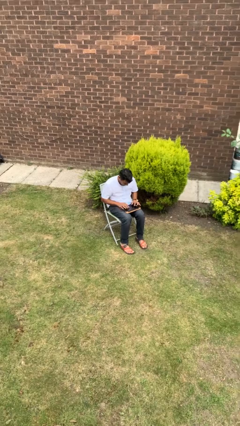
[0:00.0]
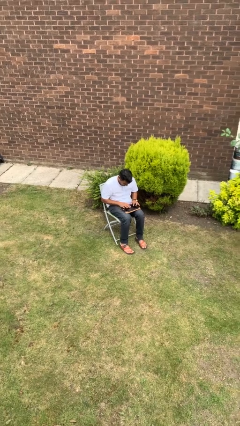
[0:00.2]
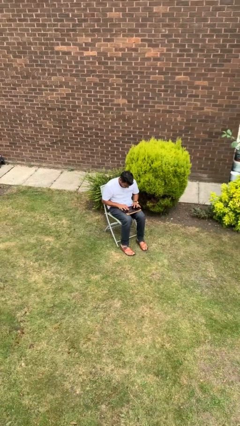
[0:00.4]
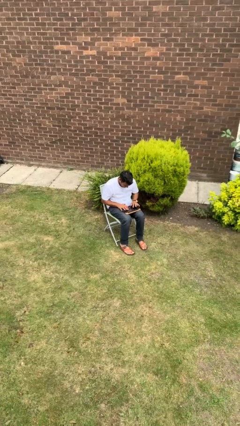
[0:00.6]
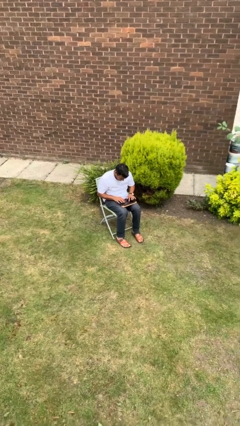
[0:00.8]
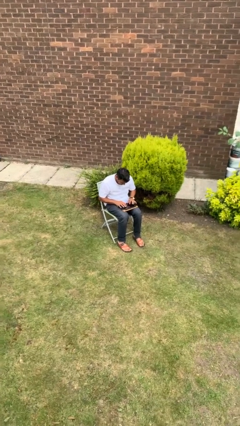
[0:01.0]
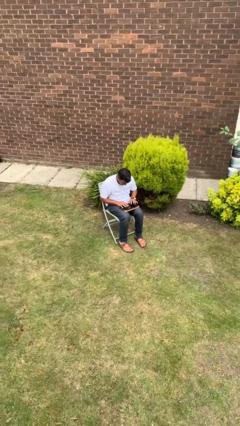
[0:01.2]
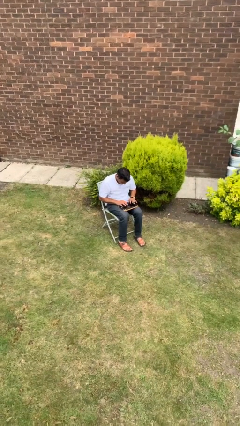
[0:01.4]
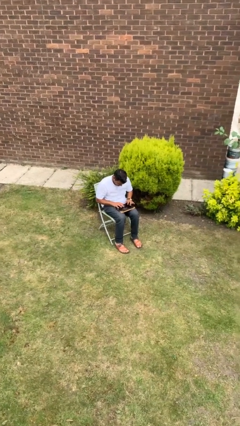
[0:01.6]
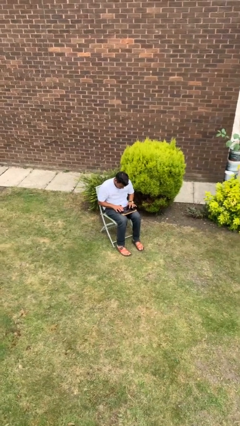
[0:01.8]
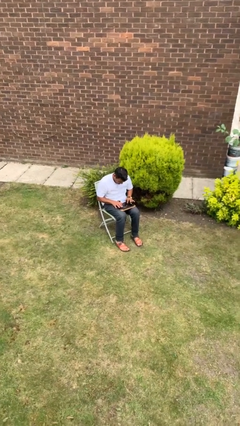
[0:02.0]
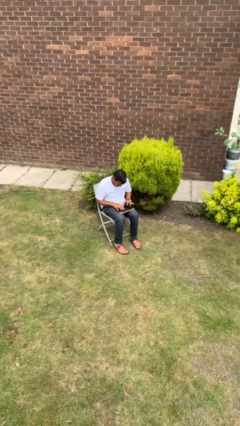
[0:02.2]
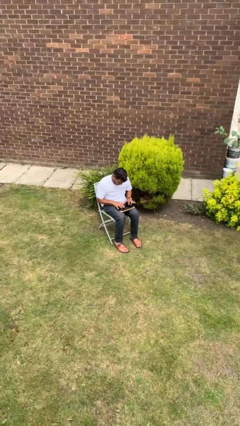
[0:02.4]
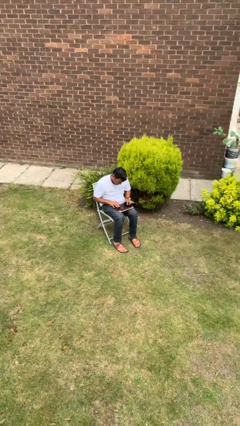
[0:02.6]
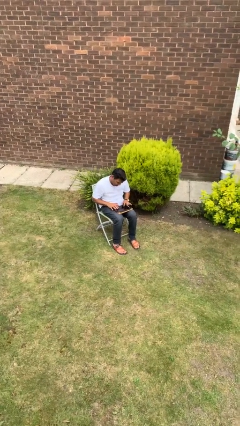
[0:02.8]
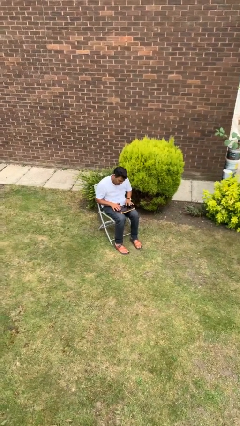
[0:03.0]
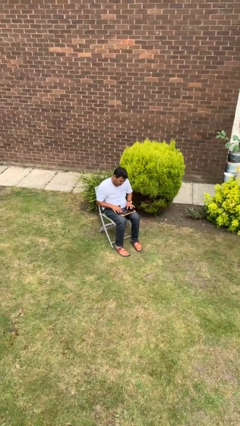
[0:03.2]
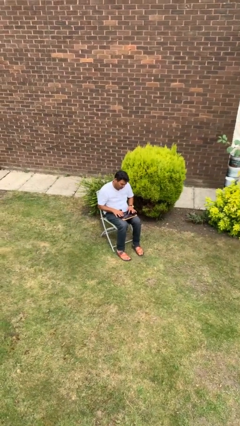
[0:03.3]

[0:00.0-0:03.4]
person interacts with tablet

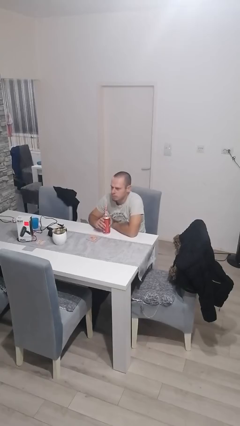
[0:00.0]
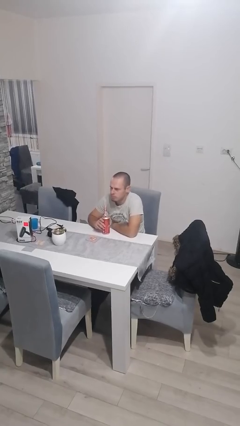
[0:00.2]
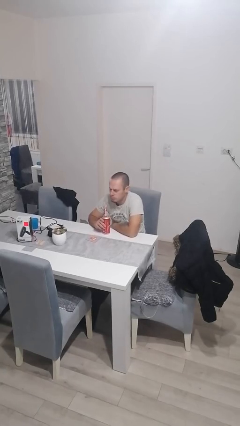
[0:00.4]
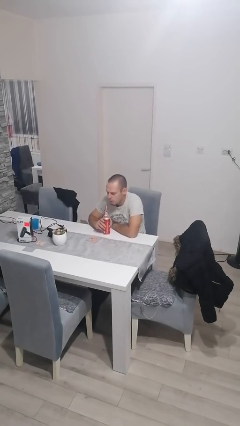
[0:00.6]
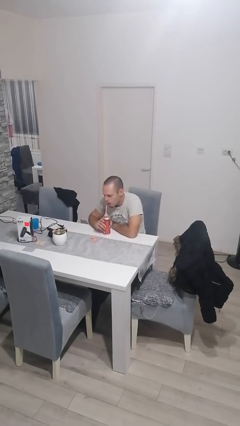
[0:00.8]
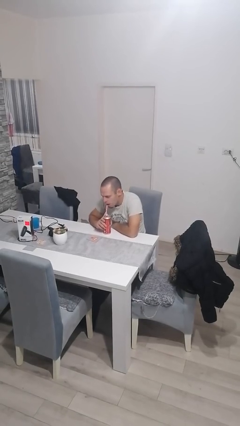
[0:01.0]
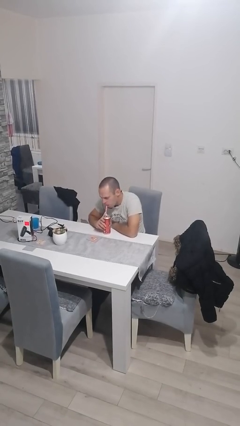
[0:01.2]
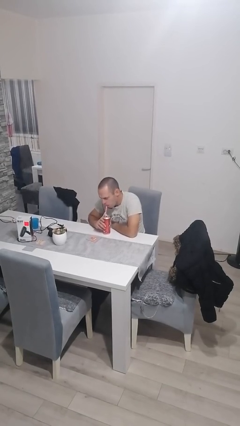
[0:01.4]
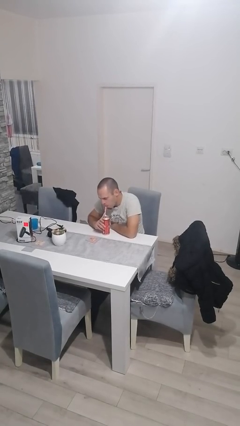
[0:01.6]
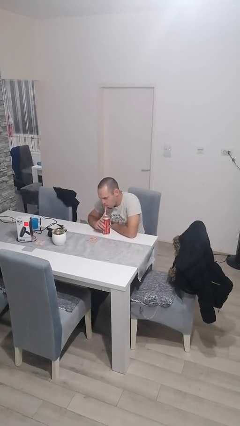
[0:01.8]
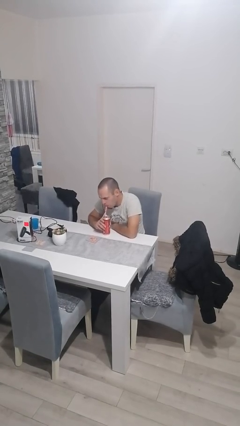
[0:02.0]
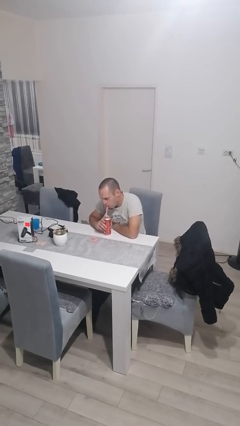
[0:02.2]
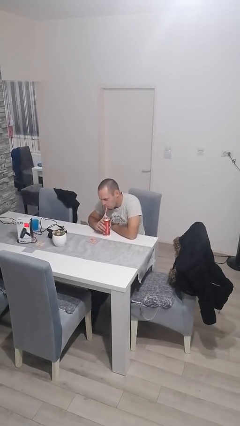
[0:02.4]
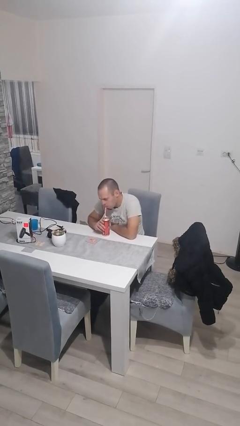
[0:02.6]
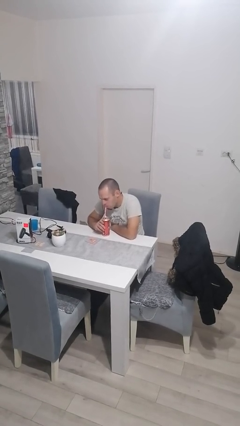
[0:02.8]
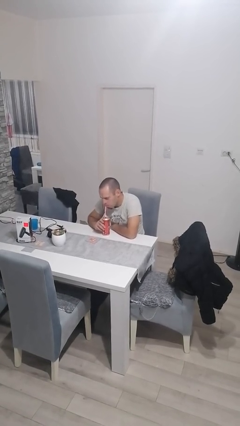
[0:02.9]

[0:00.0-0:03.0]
person drinks from straw

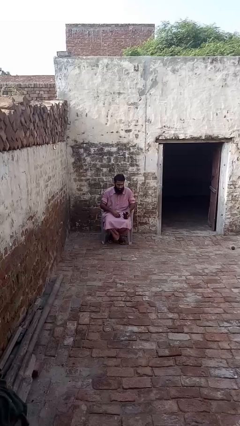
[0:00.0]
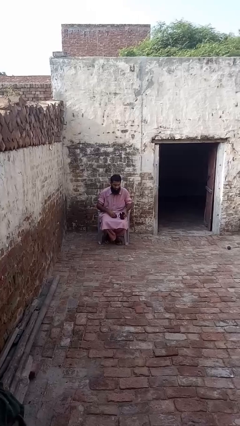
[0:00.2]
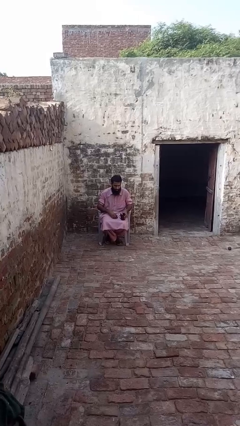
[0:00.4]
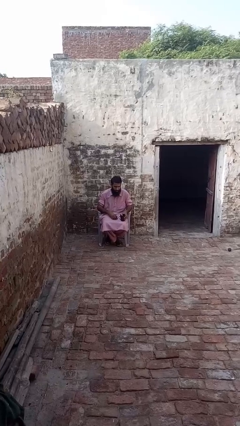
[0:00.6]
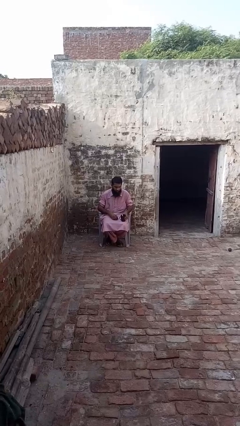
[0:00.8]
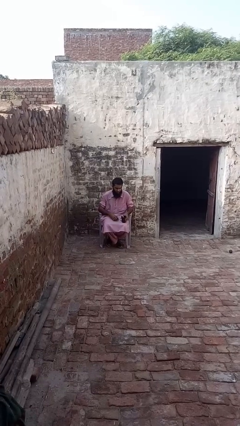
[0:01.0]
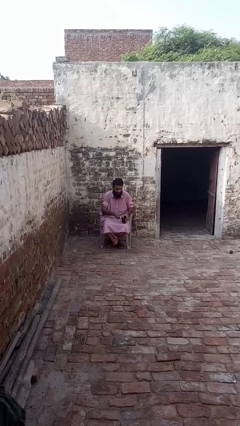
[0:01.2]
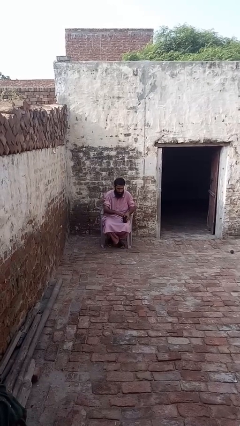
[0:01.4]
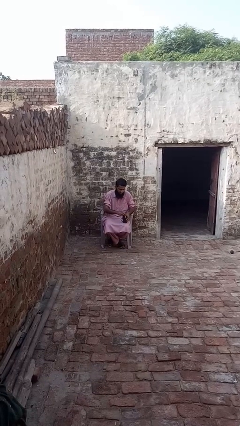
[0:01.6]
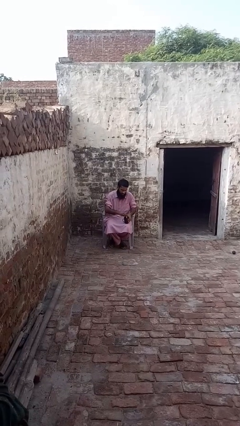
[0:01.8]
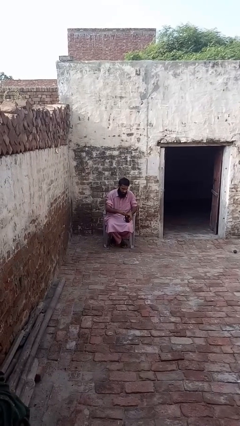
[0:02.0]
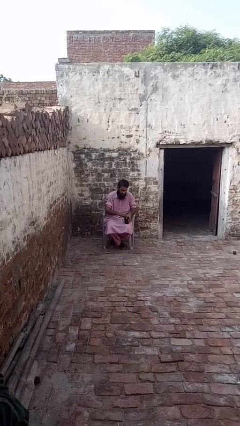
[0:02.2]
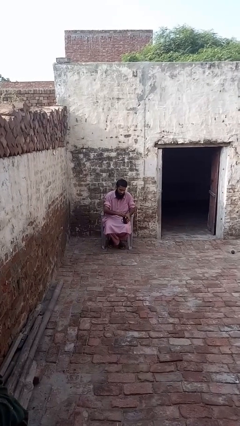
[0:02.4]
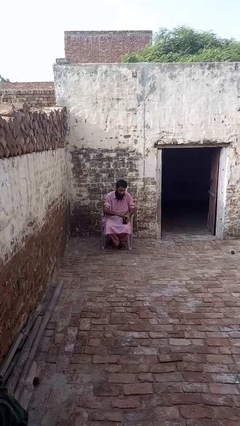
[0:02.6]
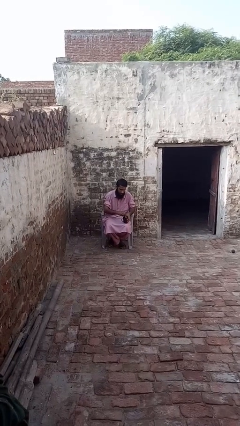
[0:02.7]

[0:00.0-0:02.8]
person stirs mug

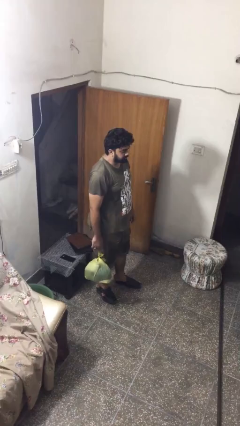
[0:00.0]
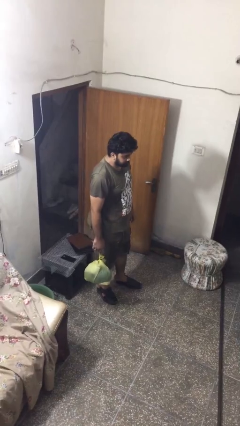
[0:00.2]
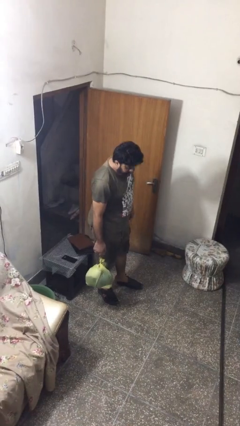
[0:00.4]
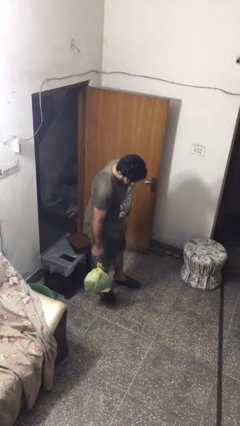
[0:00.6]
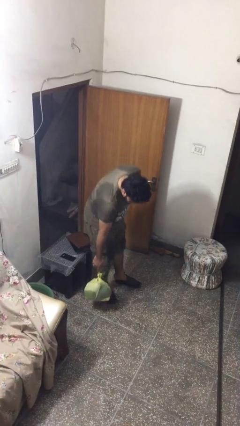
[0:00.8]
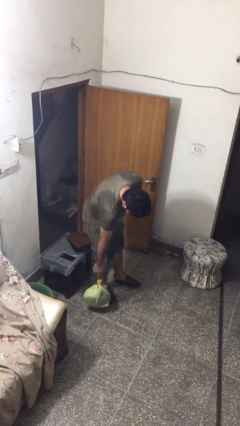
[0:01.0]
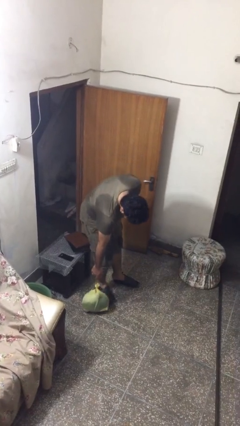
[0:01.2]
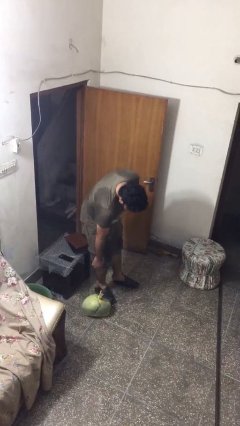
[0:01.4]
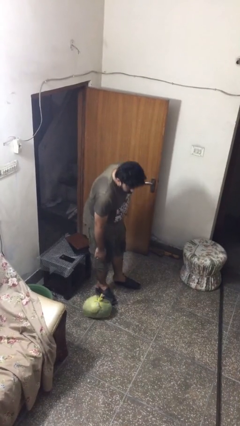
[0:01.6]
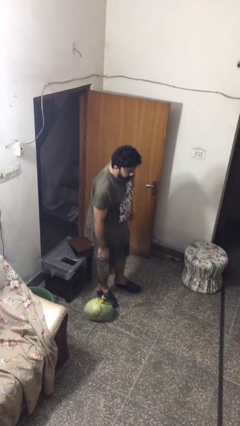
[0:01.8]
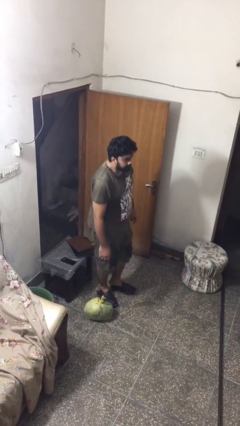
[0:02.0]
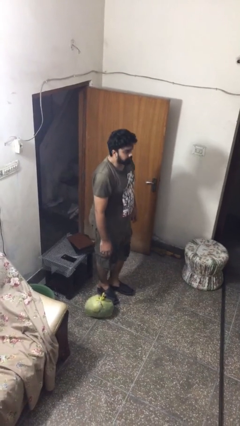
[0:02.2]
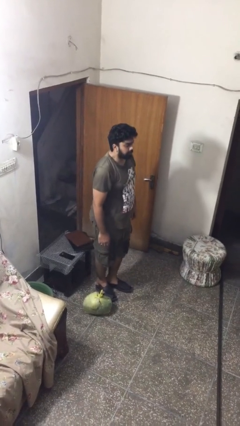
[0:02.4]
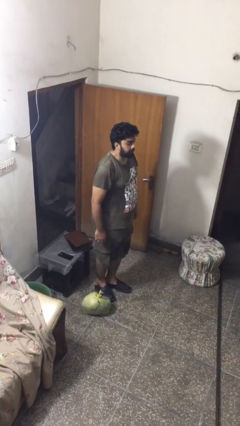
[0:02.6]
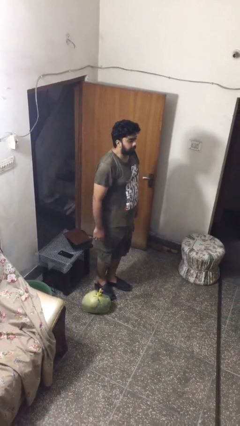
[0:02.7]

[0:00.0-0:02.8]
person puts down object on floor

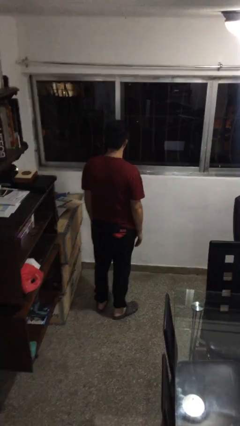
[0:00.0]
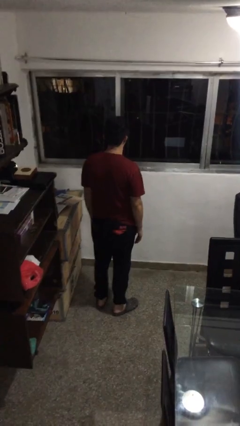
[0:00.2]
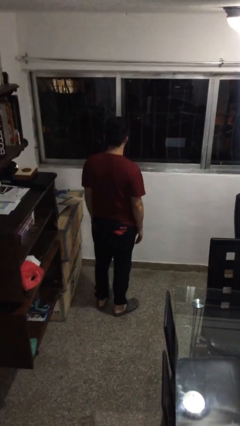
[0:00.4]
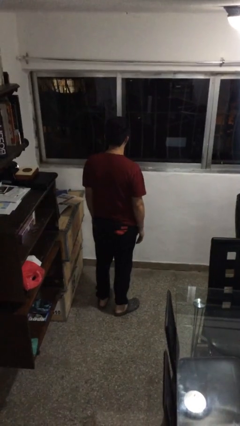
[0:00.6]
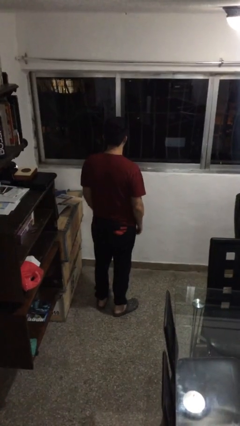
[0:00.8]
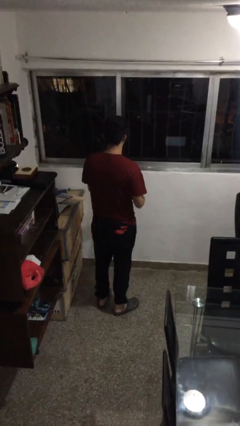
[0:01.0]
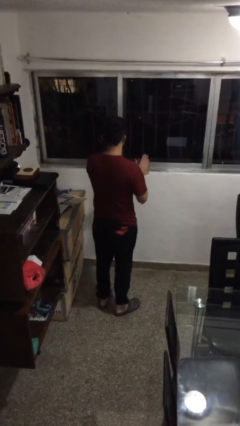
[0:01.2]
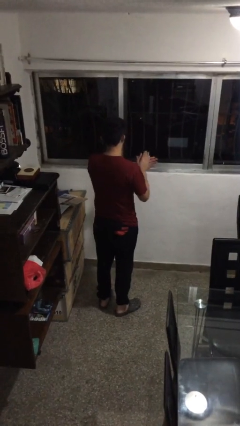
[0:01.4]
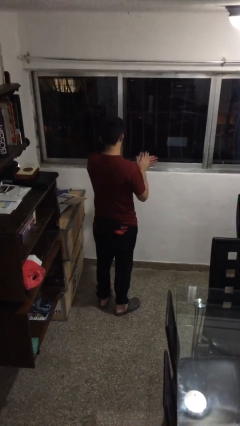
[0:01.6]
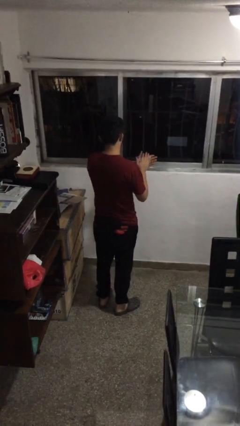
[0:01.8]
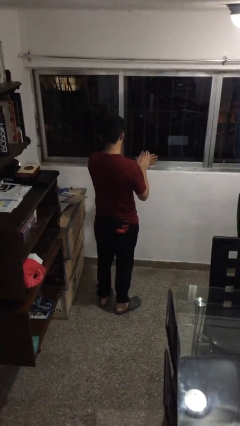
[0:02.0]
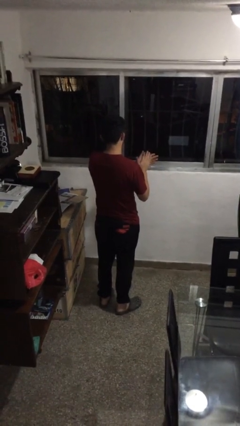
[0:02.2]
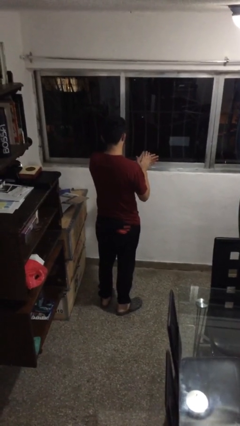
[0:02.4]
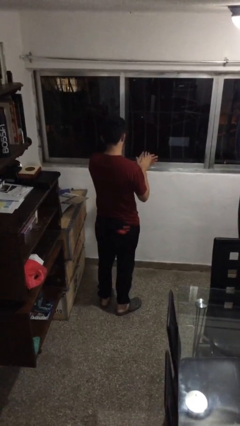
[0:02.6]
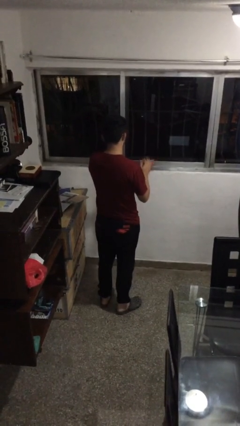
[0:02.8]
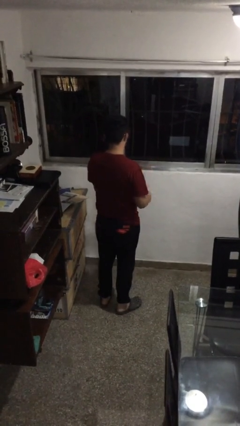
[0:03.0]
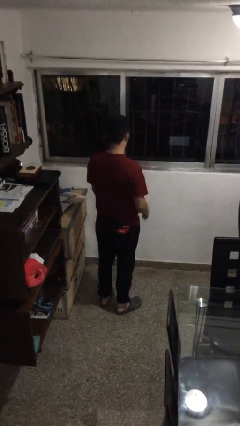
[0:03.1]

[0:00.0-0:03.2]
person claps hands

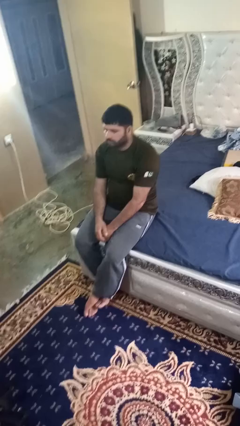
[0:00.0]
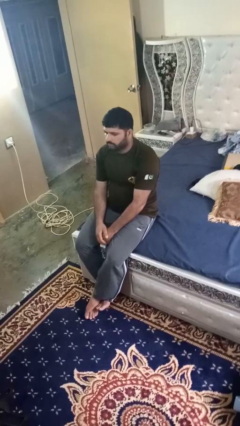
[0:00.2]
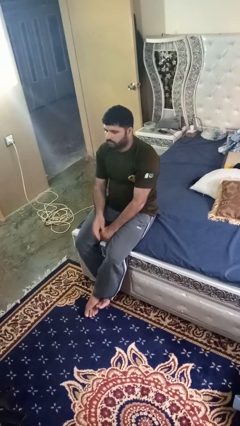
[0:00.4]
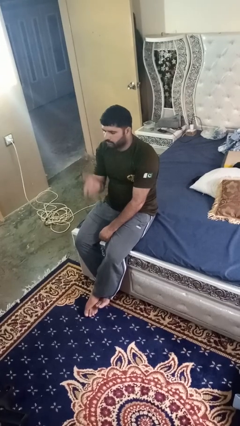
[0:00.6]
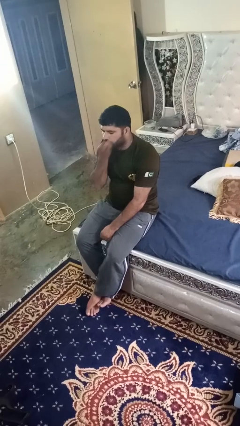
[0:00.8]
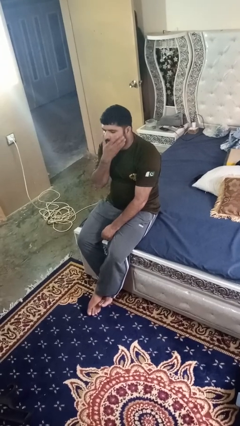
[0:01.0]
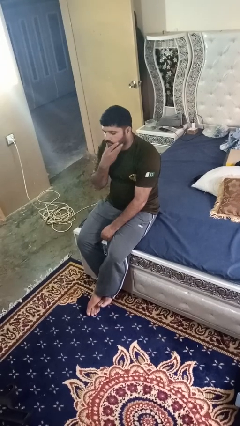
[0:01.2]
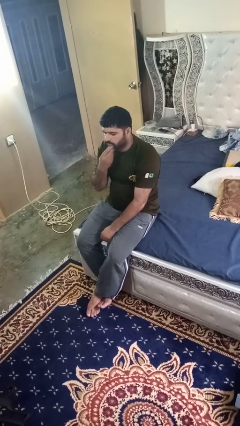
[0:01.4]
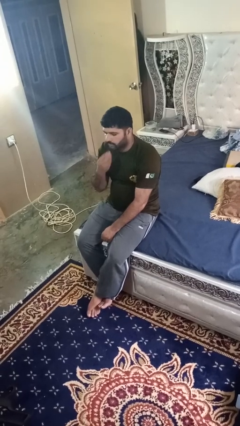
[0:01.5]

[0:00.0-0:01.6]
person strokes chin

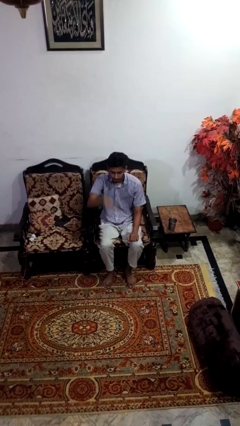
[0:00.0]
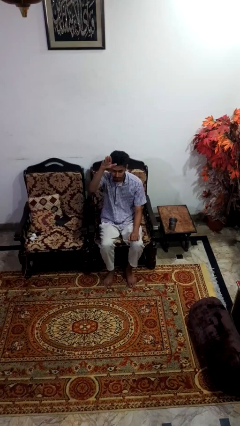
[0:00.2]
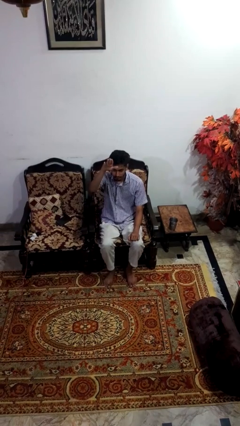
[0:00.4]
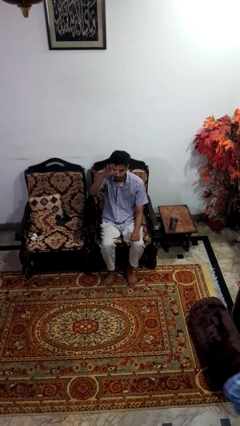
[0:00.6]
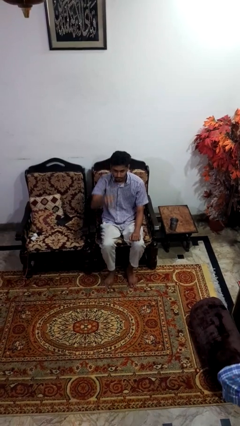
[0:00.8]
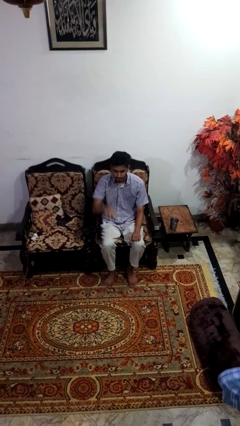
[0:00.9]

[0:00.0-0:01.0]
person gestures swipe up
